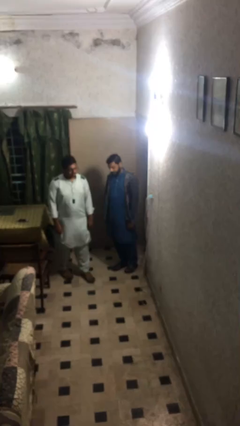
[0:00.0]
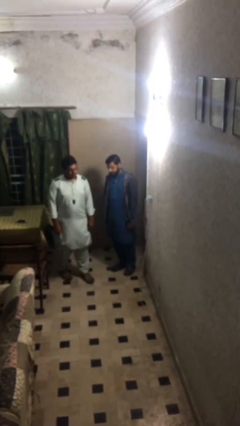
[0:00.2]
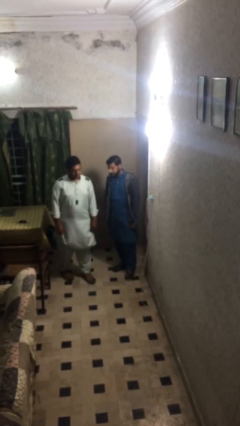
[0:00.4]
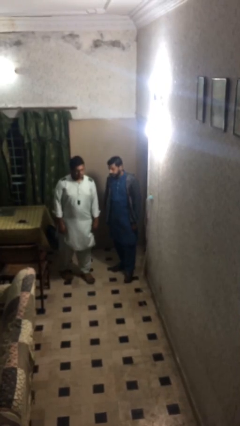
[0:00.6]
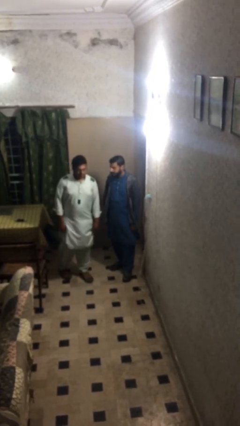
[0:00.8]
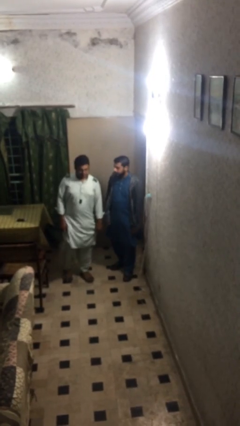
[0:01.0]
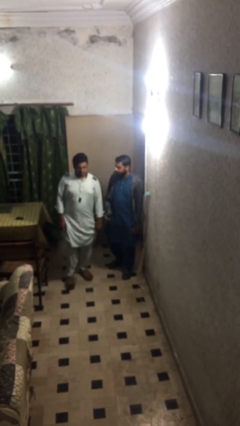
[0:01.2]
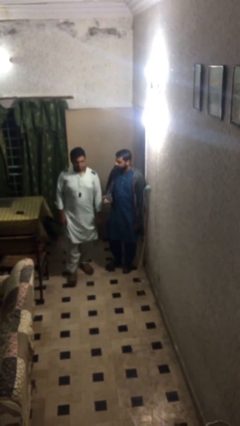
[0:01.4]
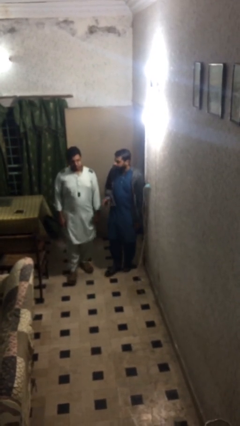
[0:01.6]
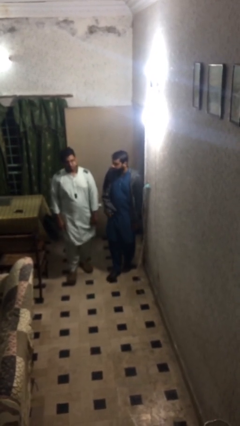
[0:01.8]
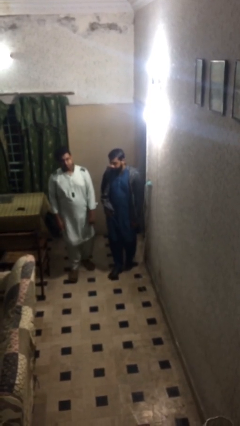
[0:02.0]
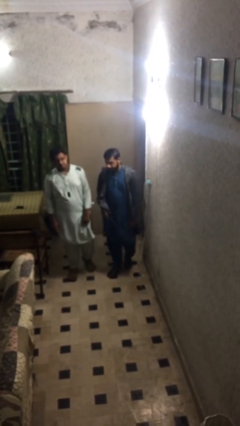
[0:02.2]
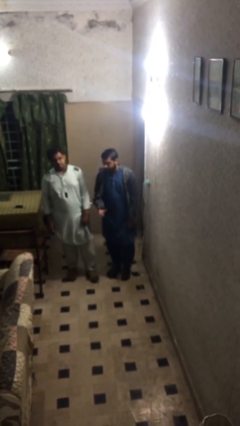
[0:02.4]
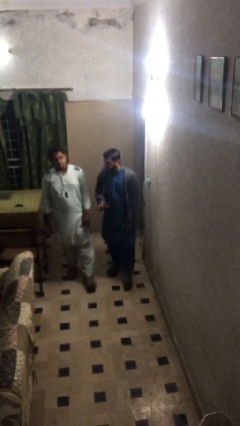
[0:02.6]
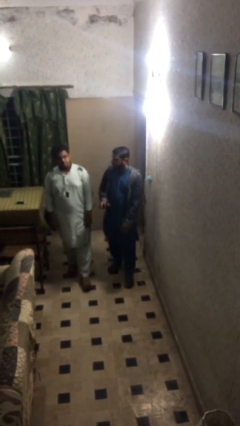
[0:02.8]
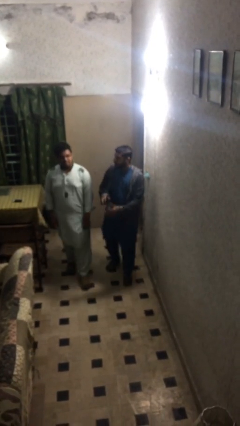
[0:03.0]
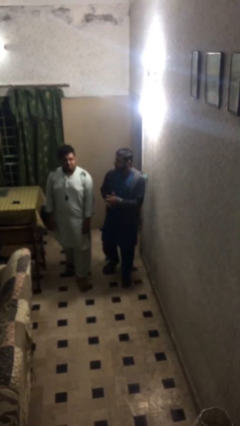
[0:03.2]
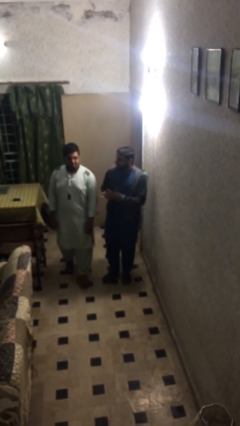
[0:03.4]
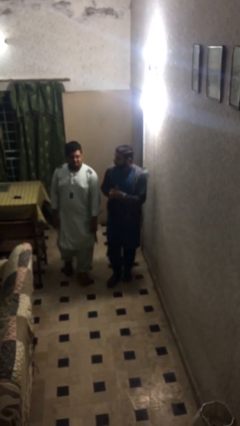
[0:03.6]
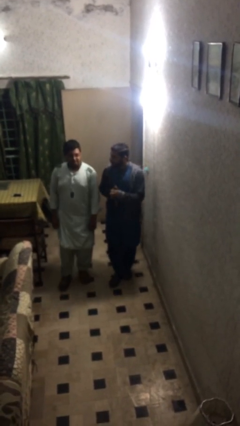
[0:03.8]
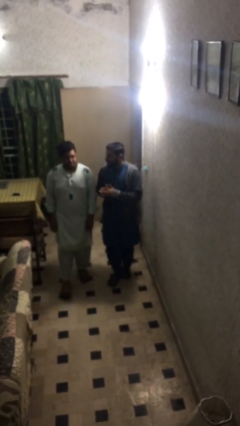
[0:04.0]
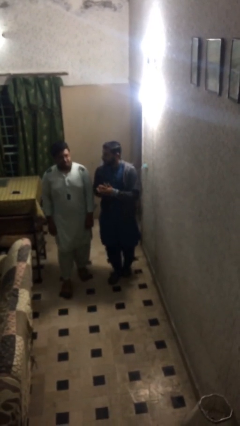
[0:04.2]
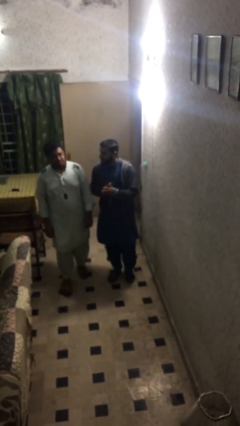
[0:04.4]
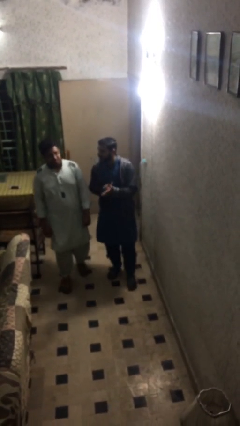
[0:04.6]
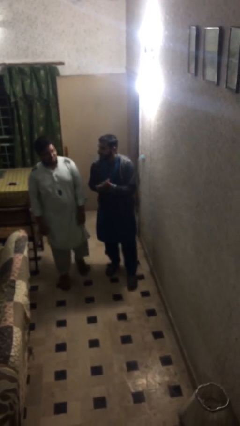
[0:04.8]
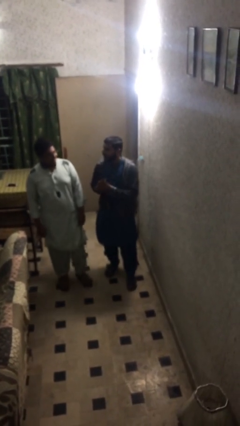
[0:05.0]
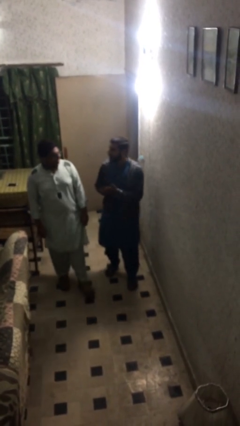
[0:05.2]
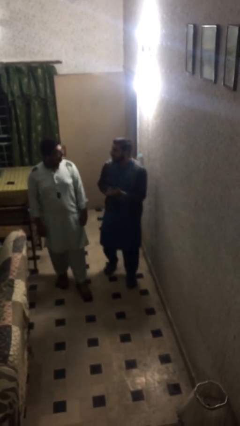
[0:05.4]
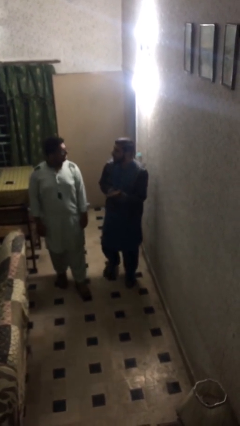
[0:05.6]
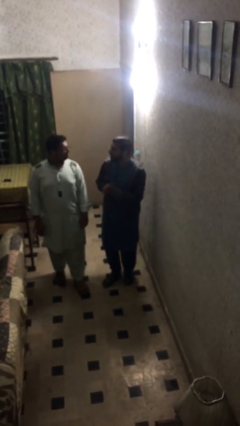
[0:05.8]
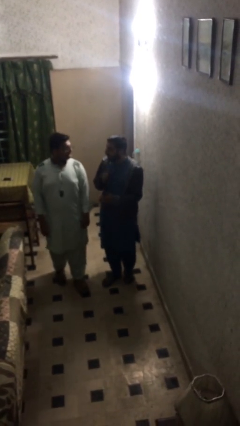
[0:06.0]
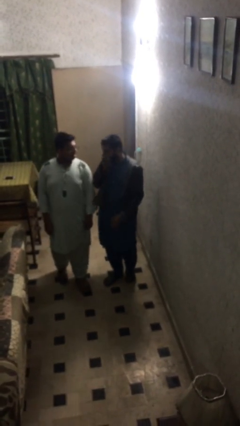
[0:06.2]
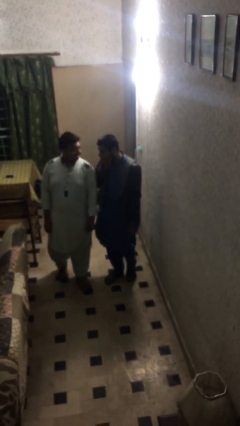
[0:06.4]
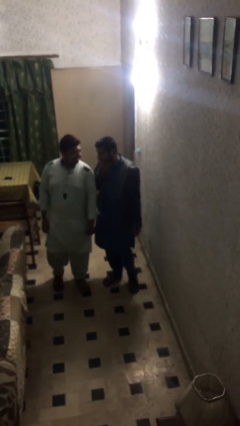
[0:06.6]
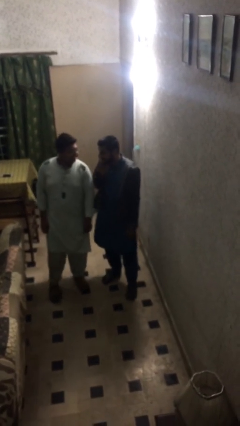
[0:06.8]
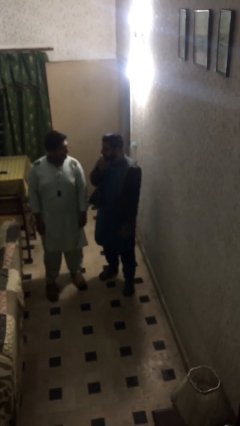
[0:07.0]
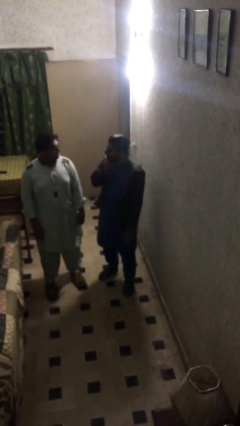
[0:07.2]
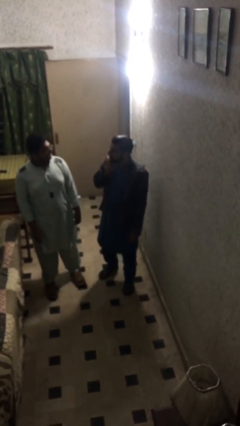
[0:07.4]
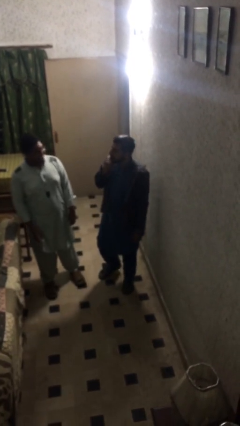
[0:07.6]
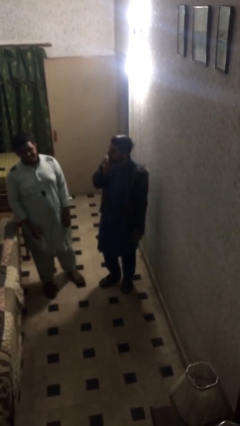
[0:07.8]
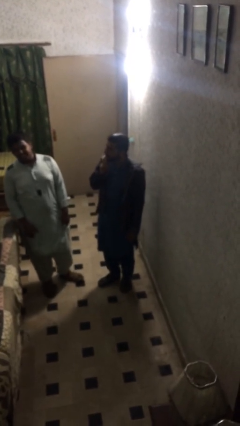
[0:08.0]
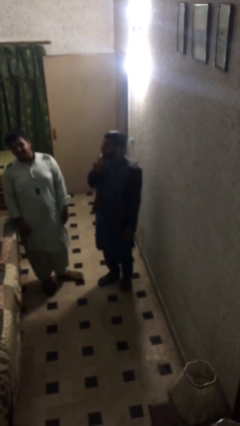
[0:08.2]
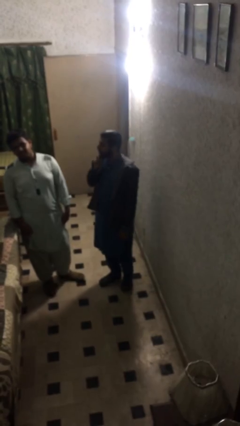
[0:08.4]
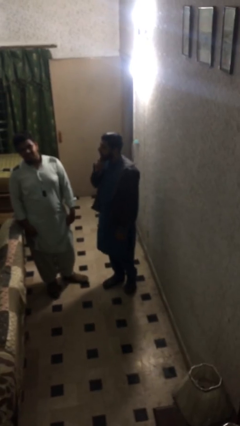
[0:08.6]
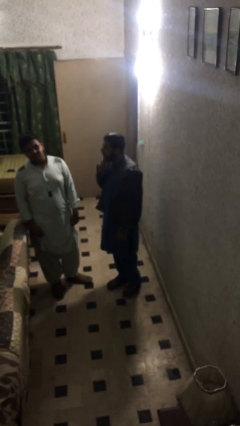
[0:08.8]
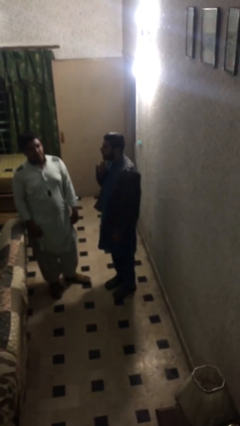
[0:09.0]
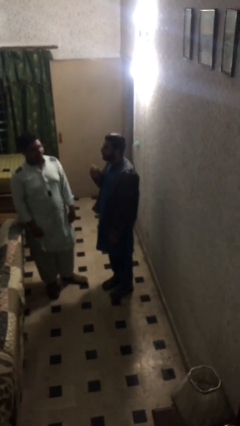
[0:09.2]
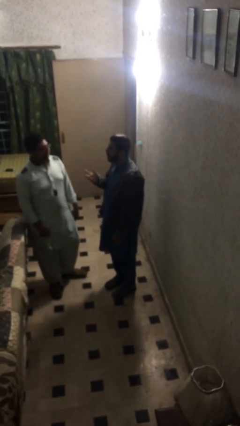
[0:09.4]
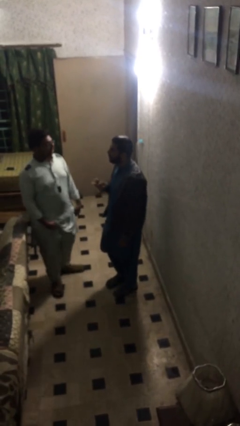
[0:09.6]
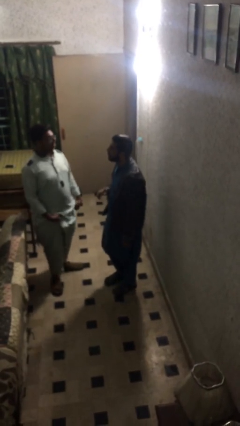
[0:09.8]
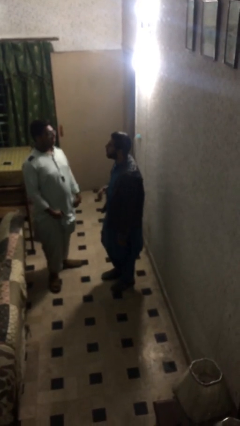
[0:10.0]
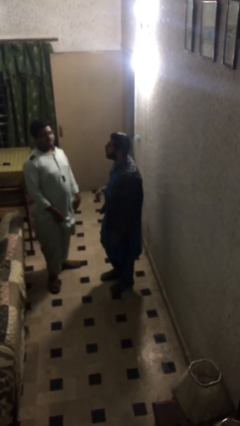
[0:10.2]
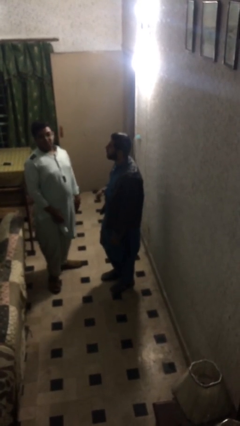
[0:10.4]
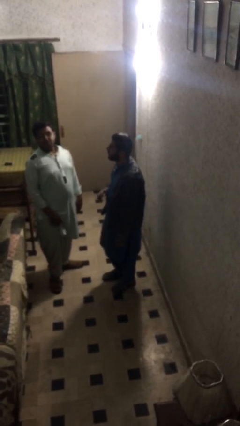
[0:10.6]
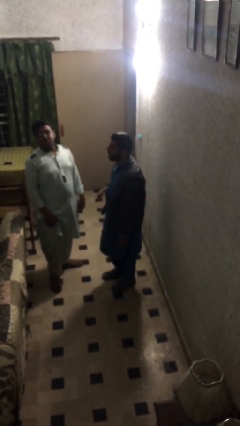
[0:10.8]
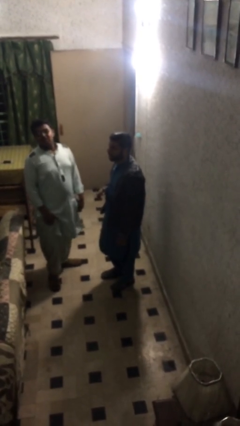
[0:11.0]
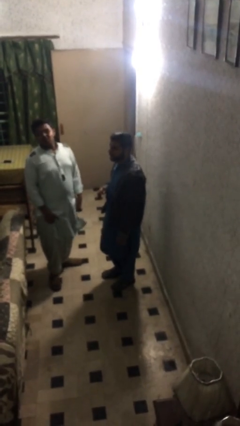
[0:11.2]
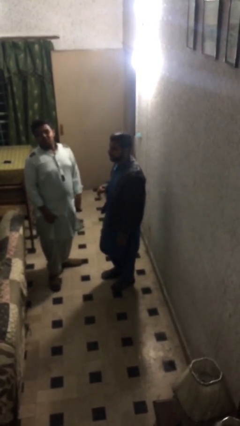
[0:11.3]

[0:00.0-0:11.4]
person talks to person

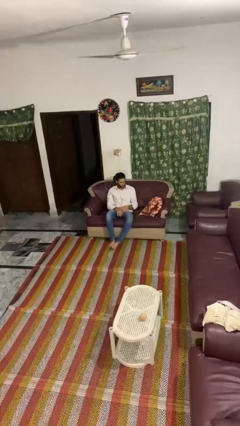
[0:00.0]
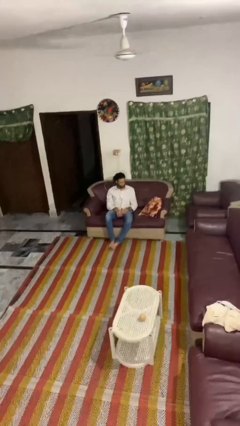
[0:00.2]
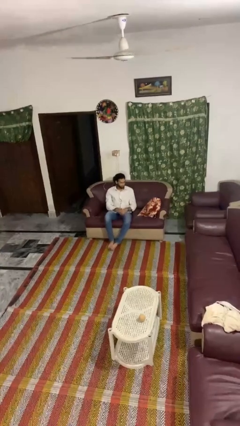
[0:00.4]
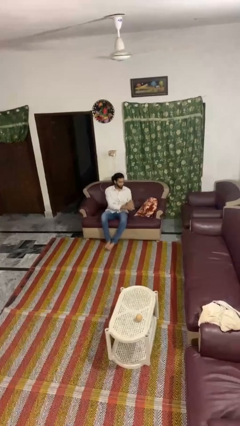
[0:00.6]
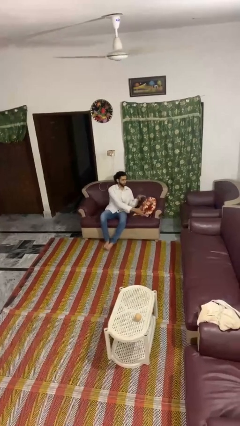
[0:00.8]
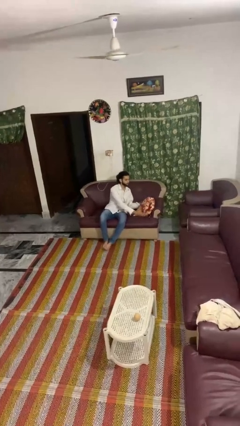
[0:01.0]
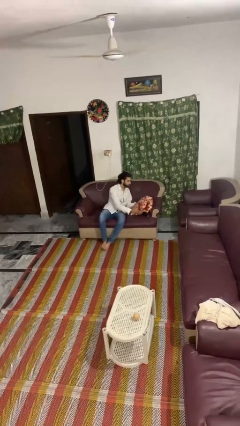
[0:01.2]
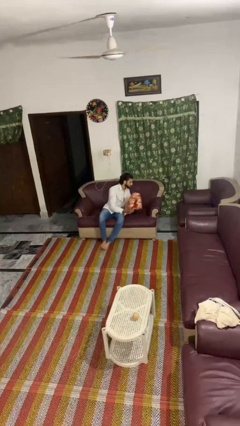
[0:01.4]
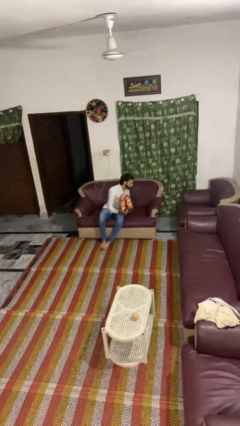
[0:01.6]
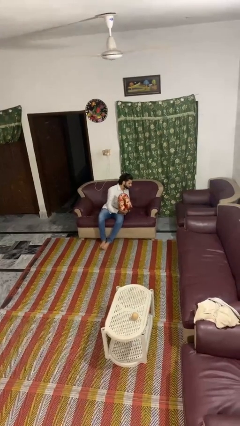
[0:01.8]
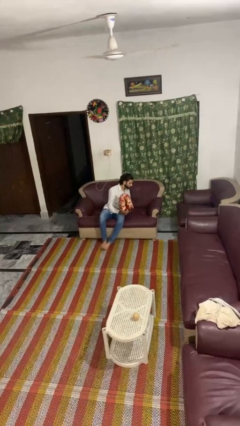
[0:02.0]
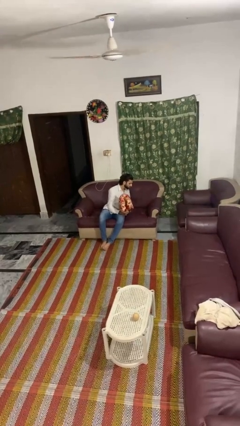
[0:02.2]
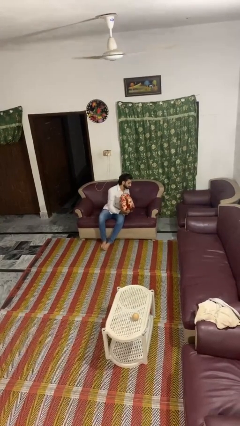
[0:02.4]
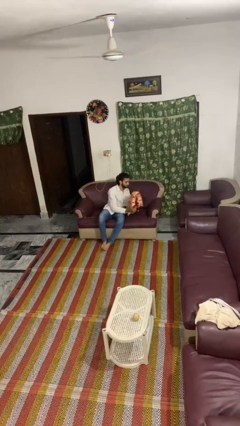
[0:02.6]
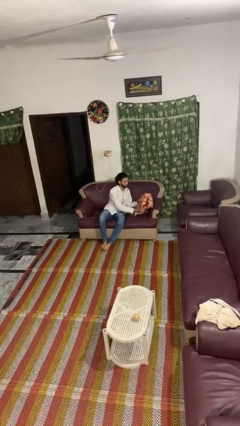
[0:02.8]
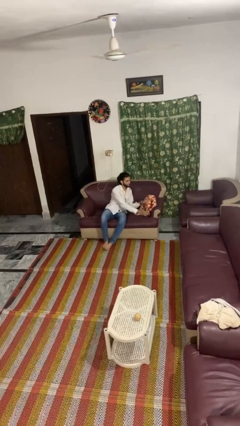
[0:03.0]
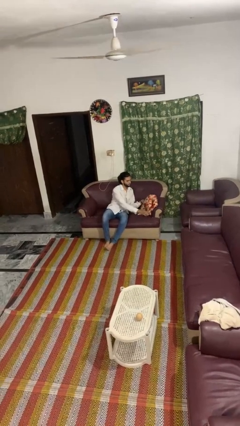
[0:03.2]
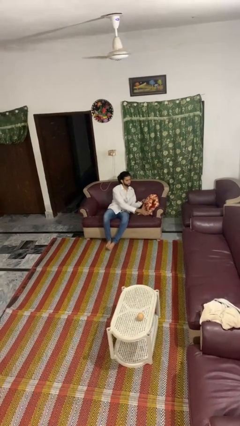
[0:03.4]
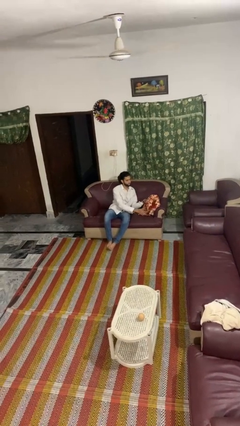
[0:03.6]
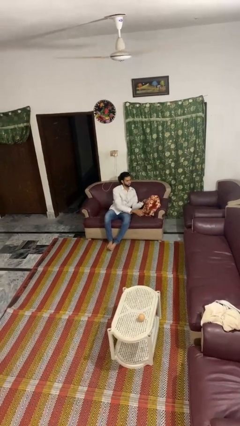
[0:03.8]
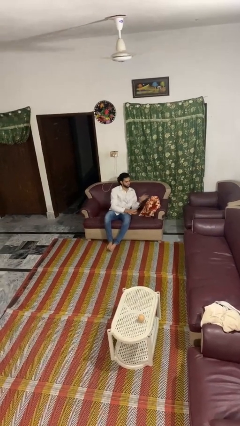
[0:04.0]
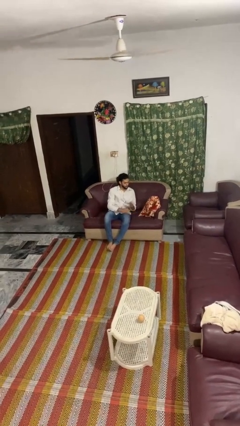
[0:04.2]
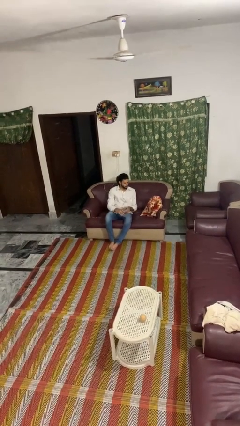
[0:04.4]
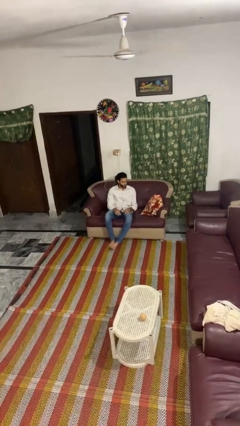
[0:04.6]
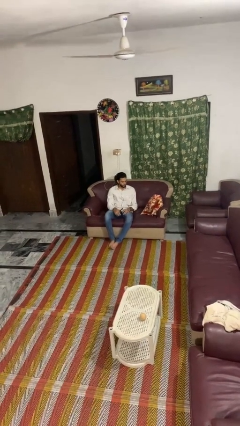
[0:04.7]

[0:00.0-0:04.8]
person searches in couch

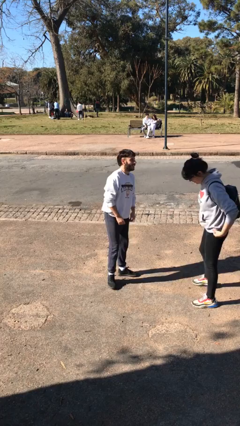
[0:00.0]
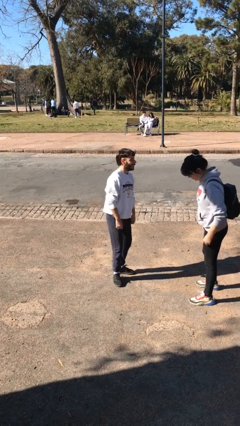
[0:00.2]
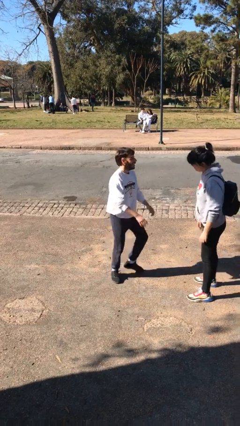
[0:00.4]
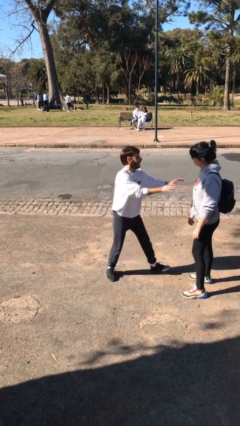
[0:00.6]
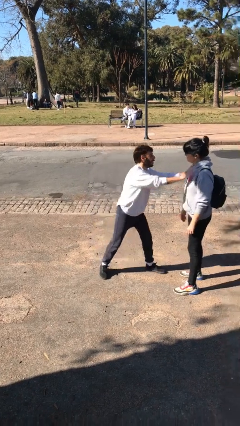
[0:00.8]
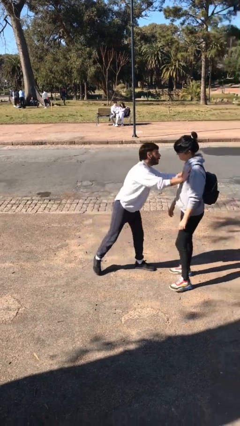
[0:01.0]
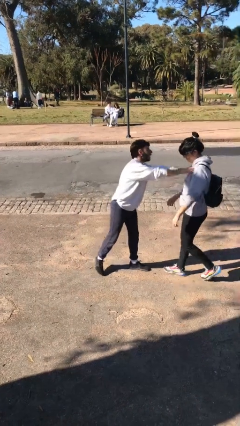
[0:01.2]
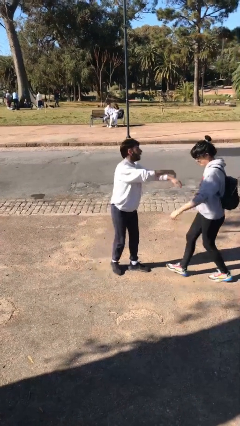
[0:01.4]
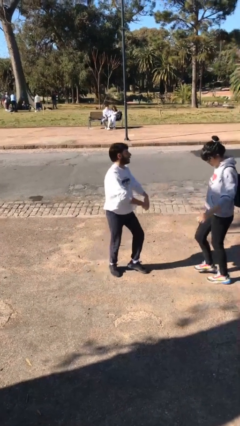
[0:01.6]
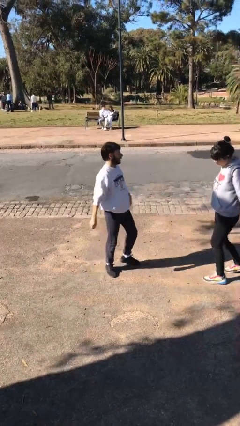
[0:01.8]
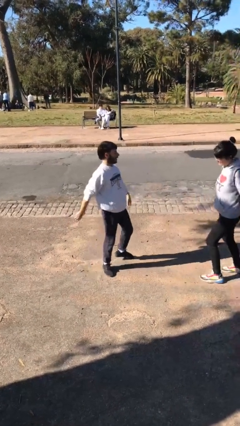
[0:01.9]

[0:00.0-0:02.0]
person shoves person

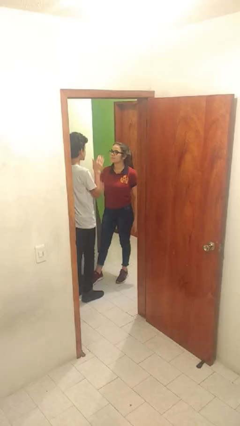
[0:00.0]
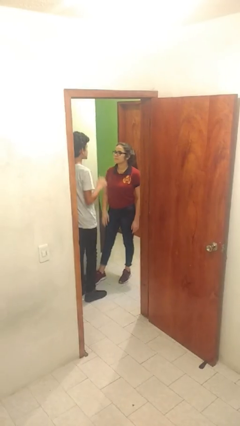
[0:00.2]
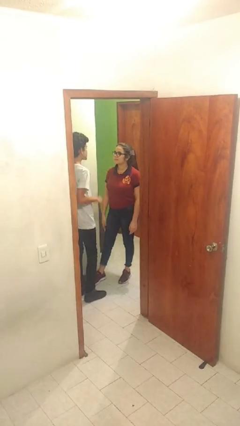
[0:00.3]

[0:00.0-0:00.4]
person highfives hand
